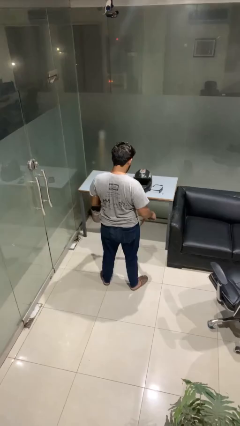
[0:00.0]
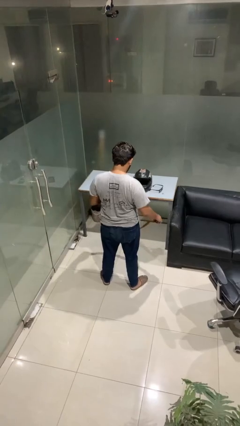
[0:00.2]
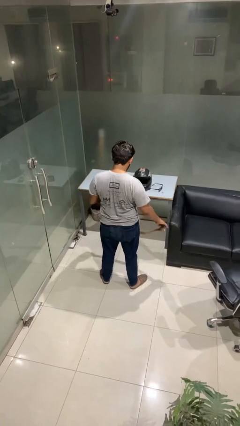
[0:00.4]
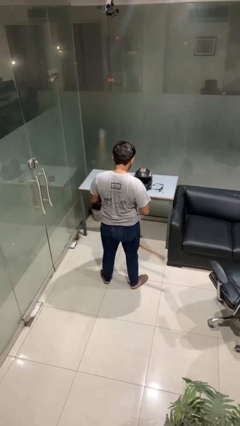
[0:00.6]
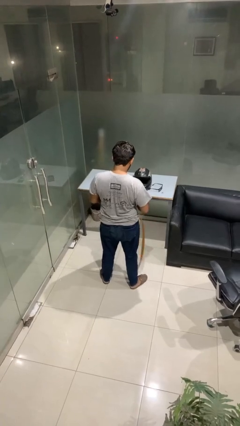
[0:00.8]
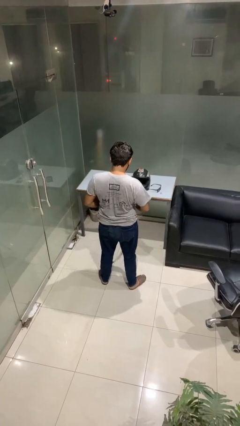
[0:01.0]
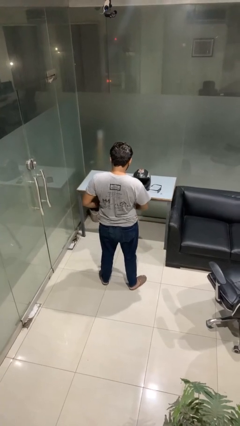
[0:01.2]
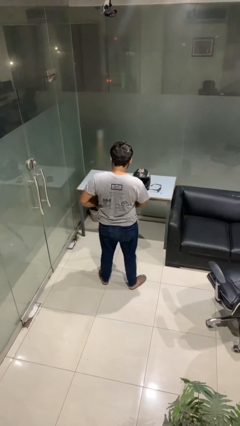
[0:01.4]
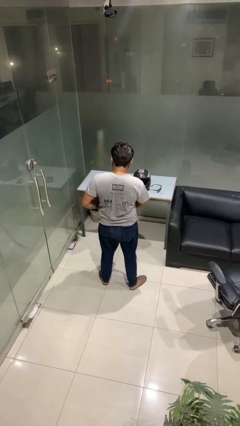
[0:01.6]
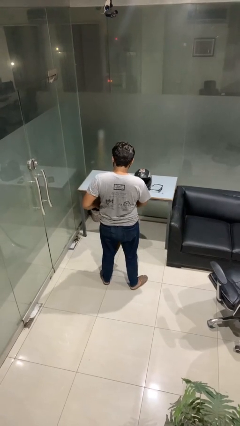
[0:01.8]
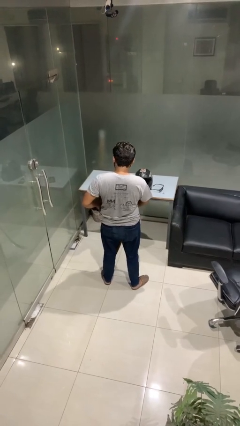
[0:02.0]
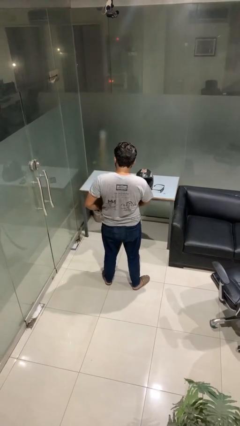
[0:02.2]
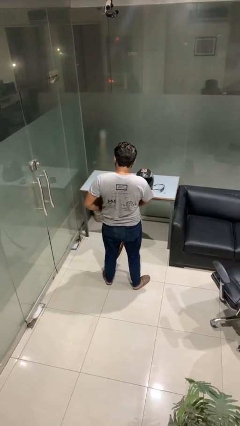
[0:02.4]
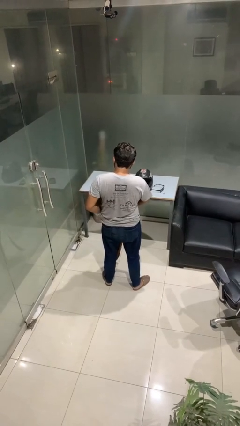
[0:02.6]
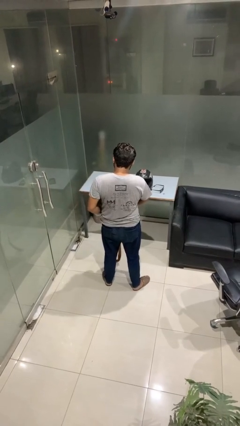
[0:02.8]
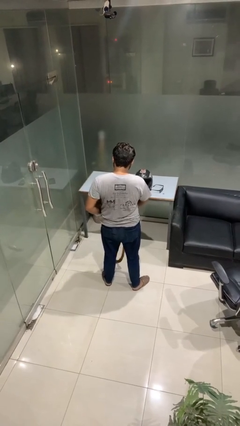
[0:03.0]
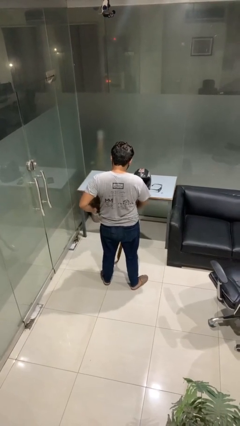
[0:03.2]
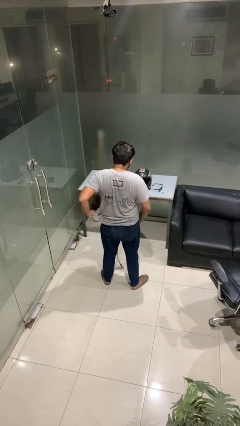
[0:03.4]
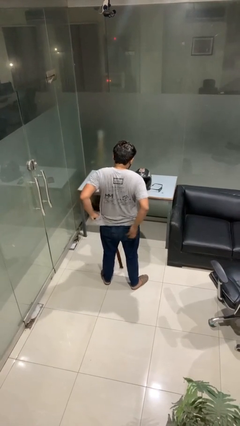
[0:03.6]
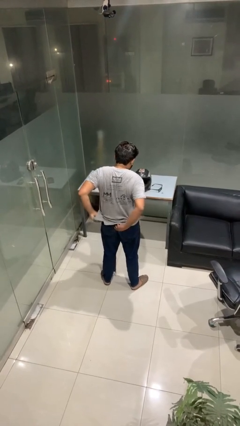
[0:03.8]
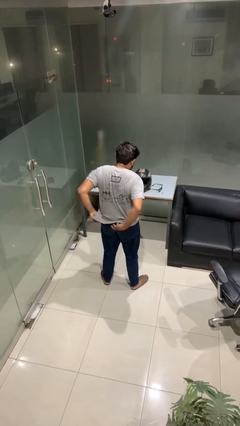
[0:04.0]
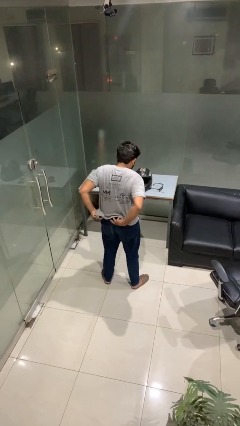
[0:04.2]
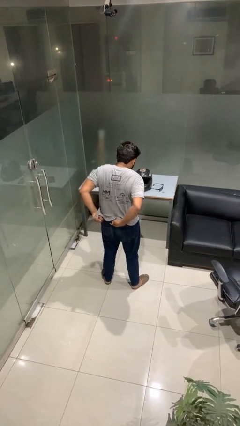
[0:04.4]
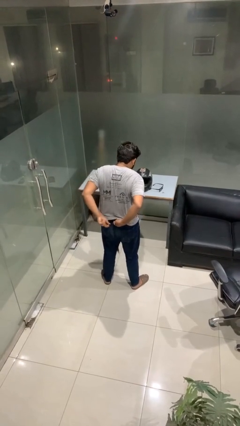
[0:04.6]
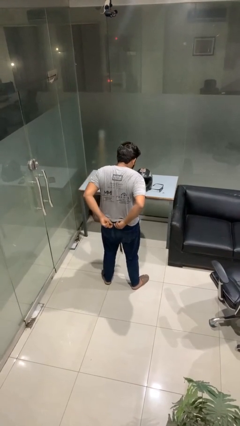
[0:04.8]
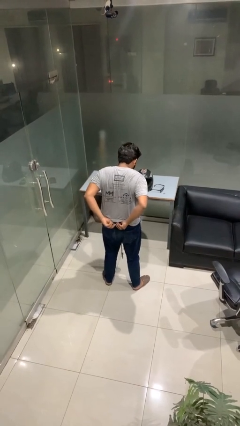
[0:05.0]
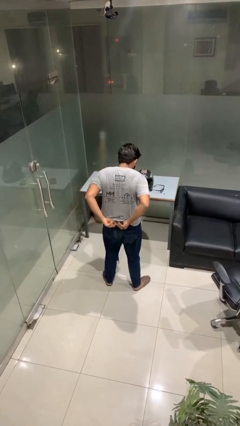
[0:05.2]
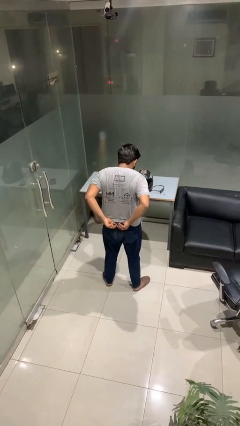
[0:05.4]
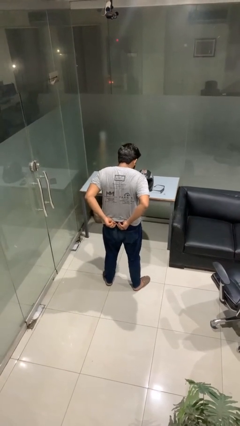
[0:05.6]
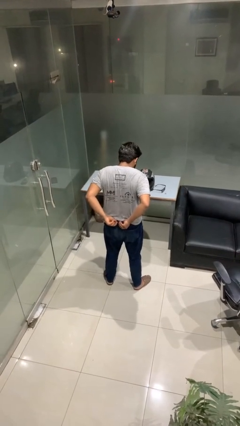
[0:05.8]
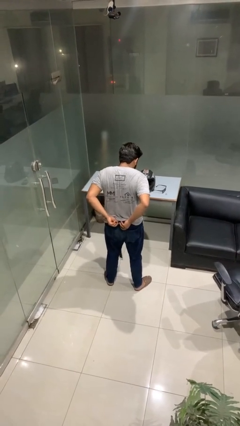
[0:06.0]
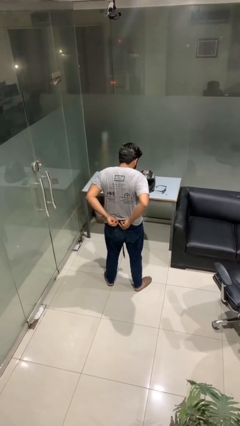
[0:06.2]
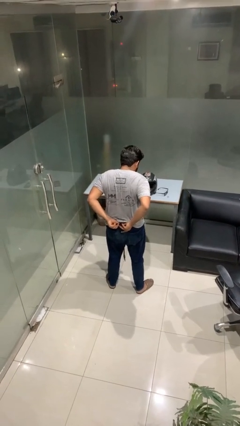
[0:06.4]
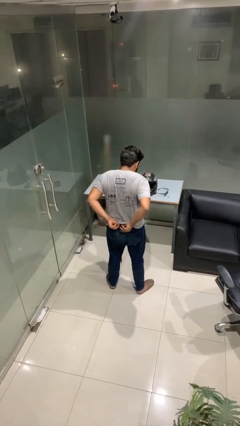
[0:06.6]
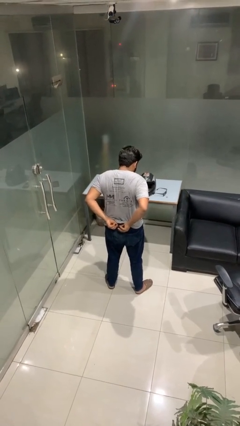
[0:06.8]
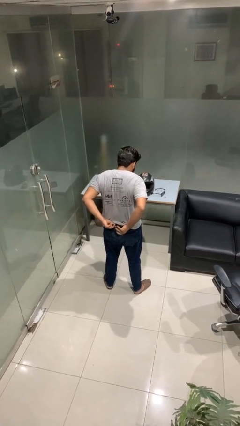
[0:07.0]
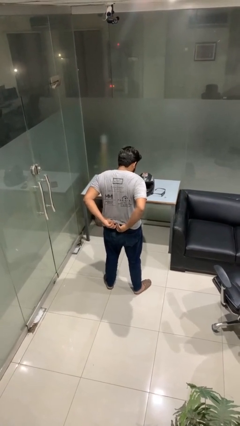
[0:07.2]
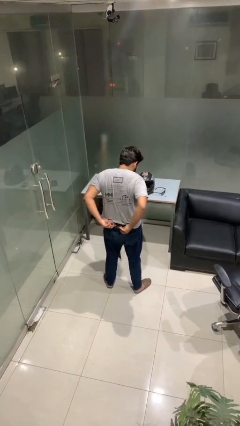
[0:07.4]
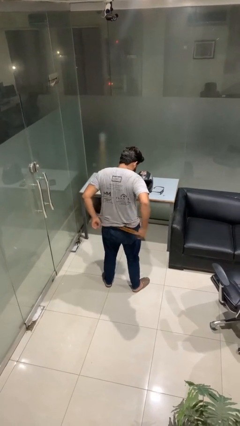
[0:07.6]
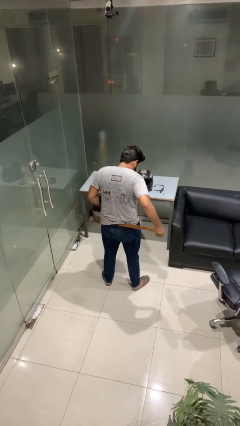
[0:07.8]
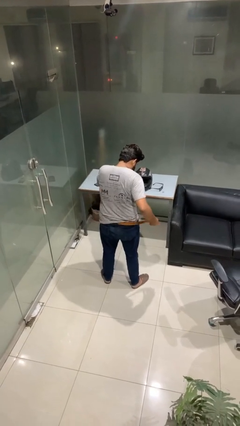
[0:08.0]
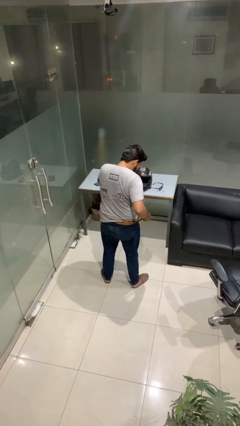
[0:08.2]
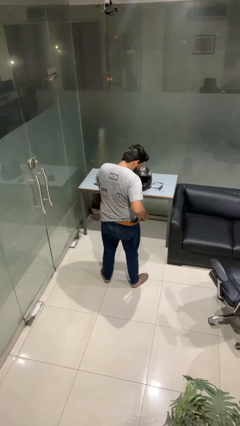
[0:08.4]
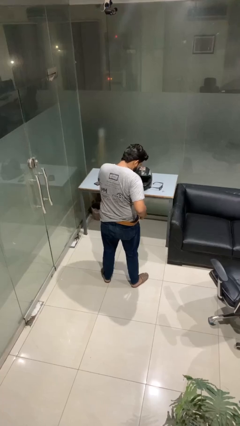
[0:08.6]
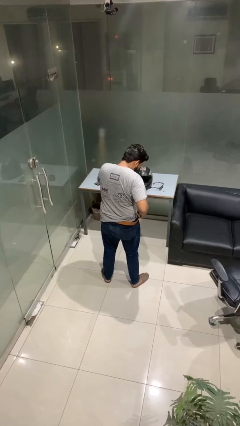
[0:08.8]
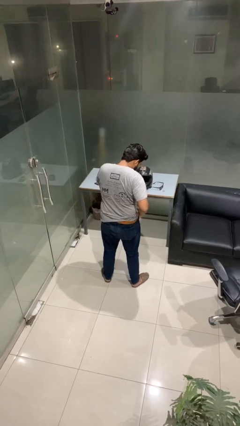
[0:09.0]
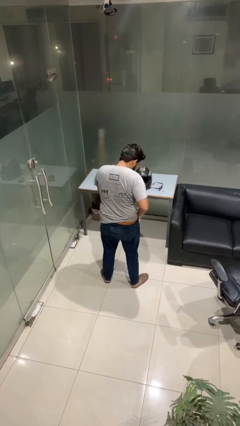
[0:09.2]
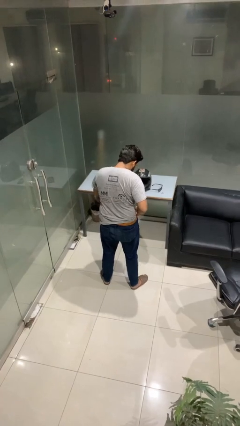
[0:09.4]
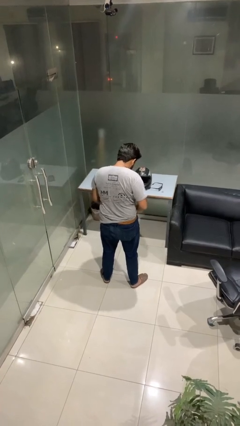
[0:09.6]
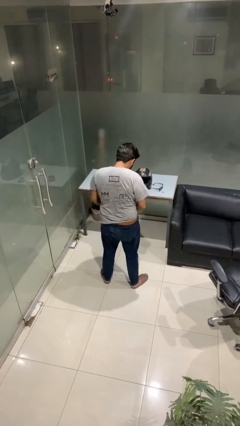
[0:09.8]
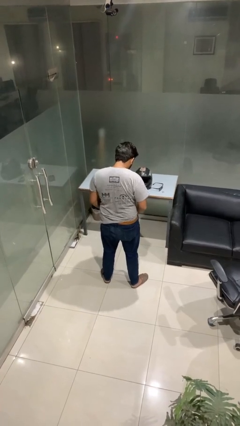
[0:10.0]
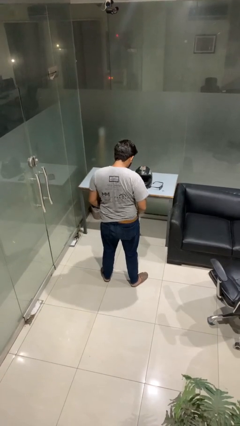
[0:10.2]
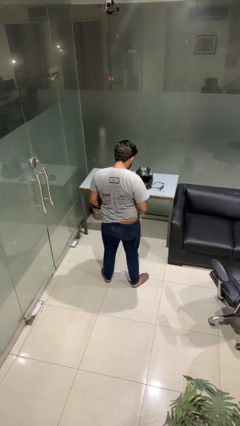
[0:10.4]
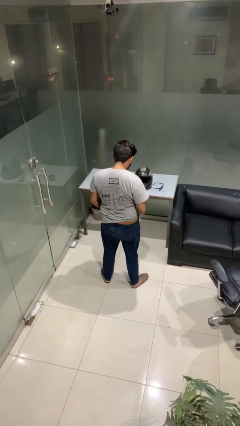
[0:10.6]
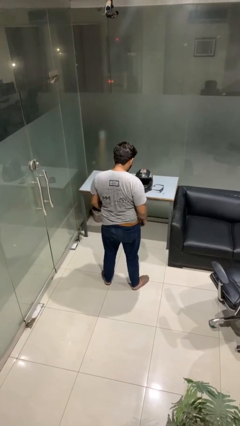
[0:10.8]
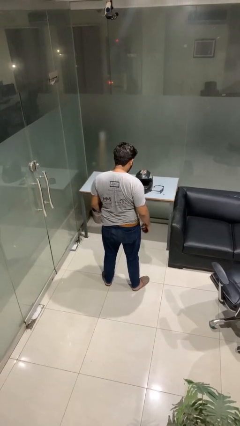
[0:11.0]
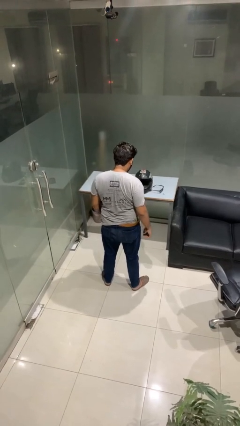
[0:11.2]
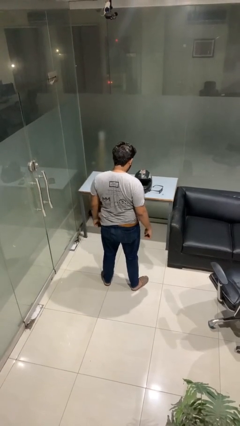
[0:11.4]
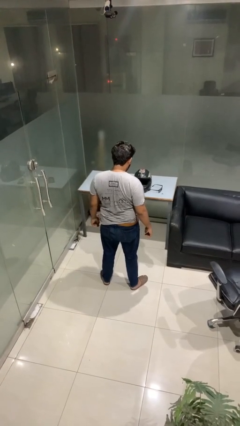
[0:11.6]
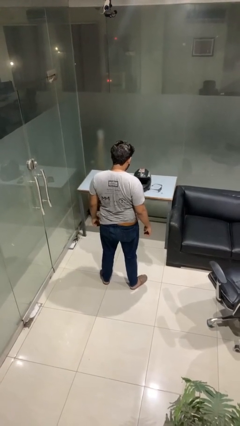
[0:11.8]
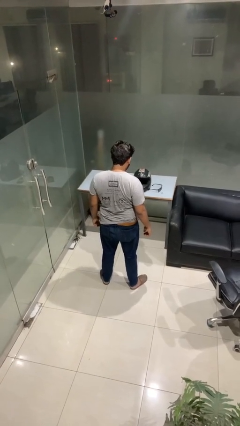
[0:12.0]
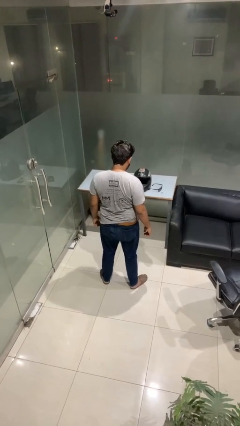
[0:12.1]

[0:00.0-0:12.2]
person puts on belt

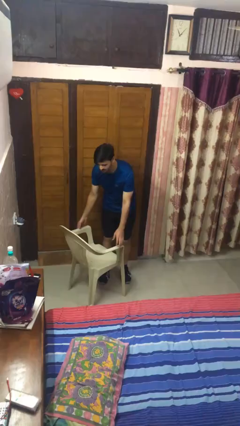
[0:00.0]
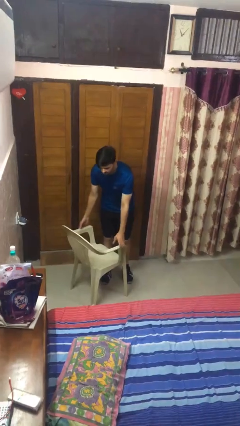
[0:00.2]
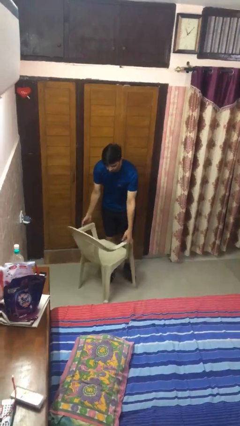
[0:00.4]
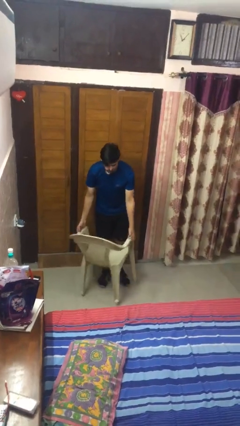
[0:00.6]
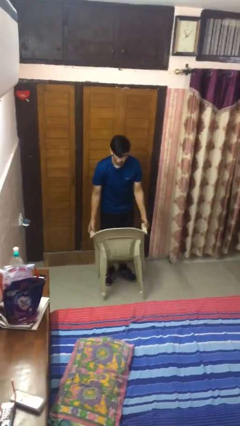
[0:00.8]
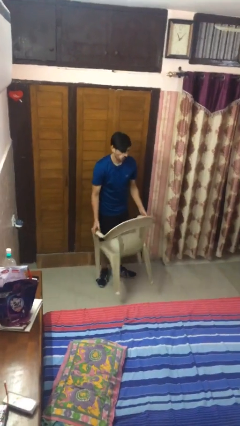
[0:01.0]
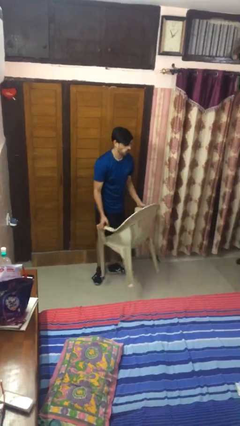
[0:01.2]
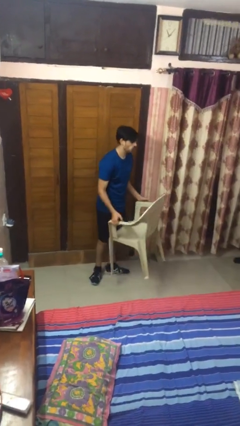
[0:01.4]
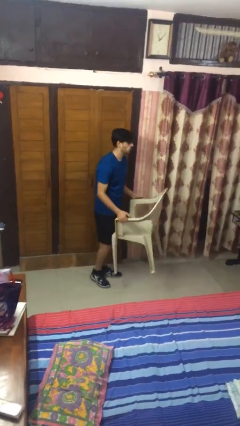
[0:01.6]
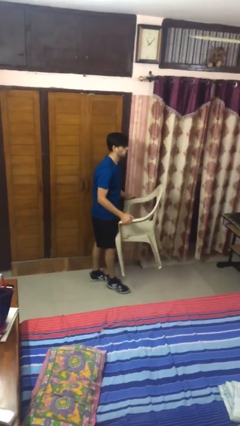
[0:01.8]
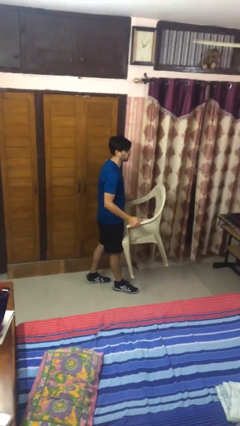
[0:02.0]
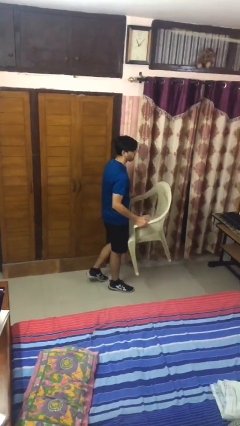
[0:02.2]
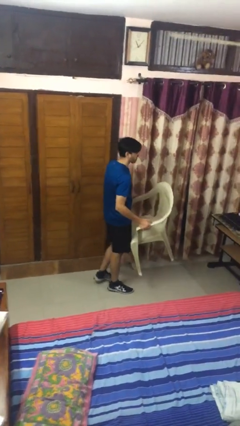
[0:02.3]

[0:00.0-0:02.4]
person carries furniture

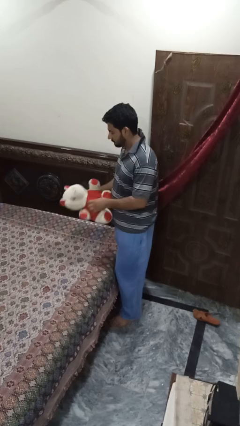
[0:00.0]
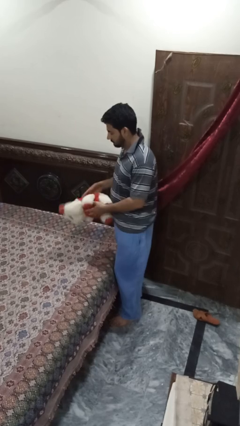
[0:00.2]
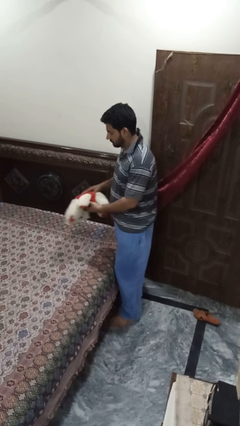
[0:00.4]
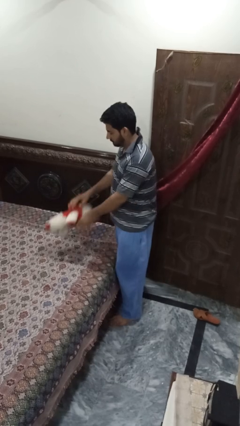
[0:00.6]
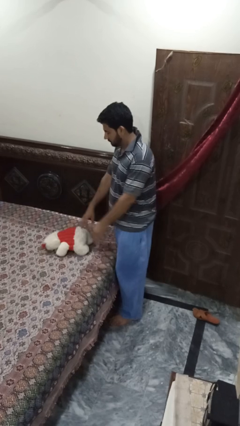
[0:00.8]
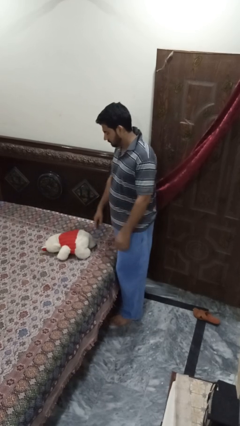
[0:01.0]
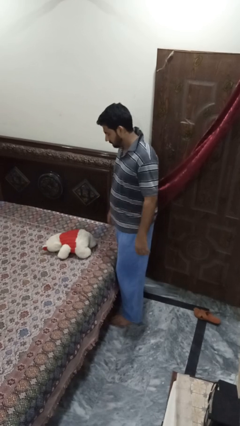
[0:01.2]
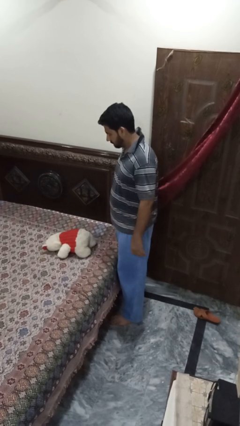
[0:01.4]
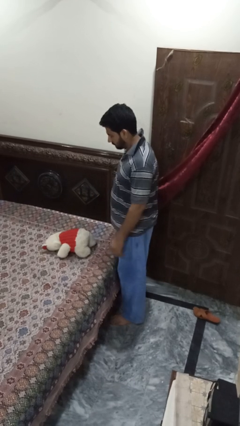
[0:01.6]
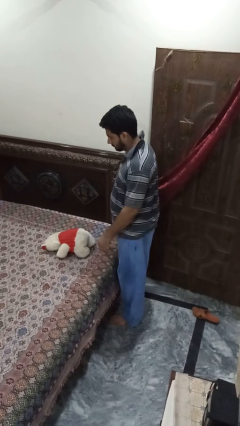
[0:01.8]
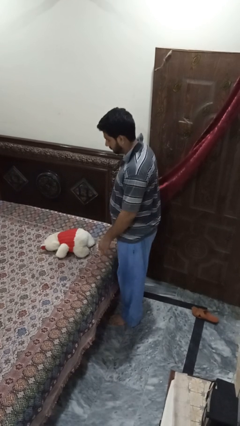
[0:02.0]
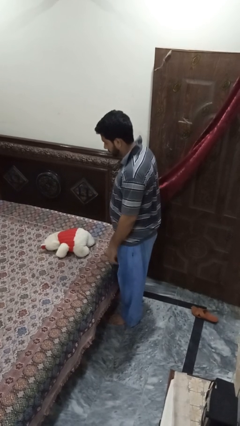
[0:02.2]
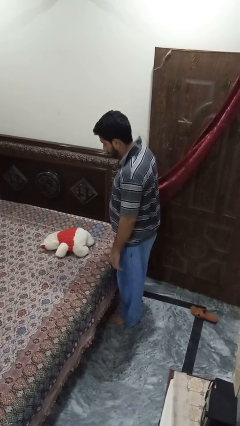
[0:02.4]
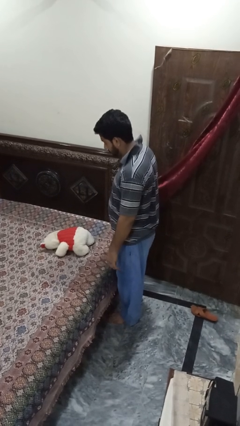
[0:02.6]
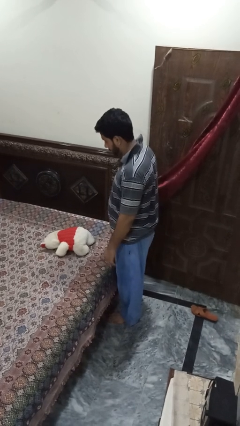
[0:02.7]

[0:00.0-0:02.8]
person puts down object on bed

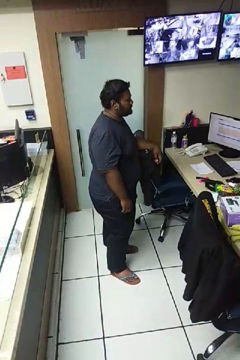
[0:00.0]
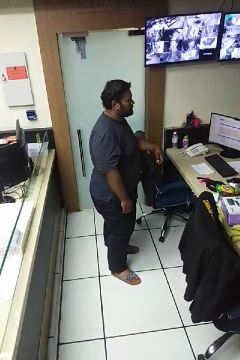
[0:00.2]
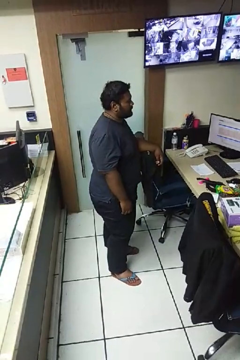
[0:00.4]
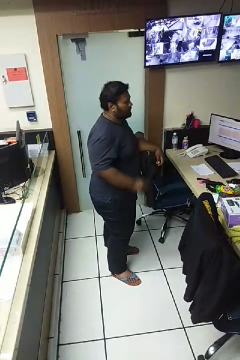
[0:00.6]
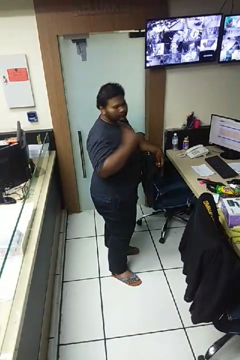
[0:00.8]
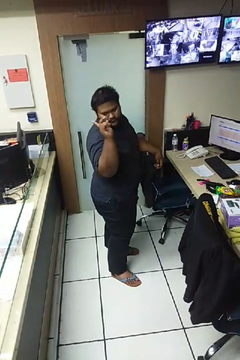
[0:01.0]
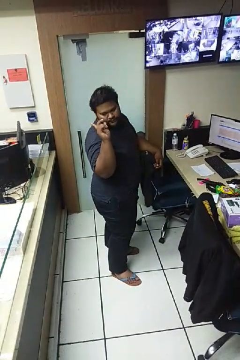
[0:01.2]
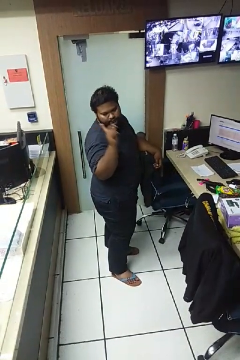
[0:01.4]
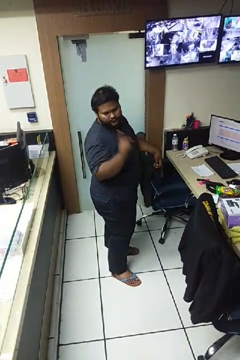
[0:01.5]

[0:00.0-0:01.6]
person gestures behind me
